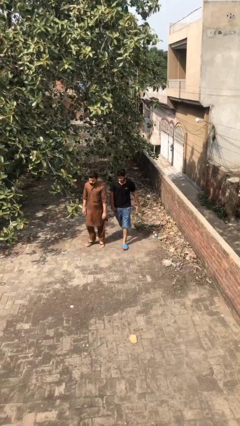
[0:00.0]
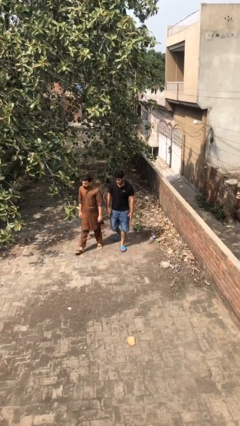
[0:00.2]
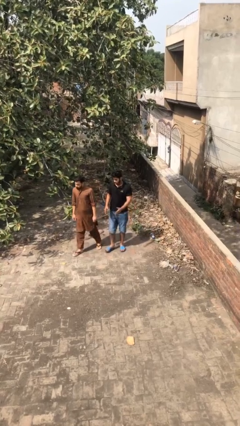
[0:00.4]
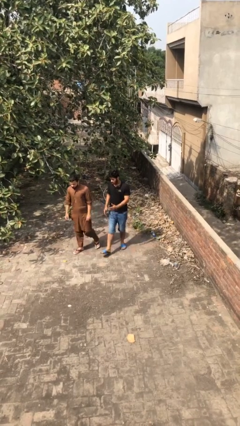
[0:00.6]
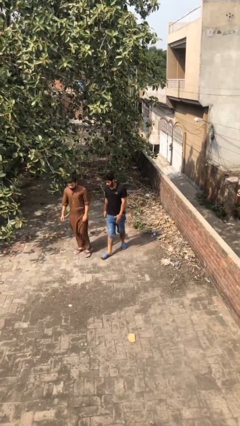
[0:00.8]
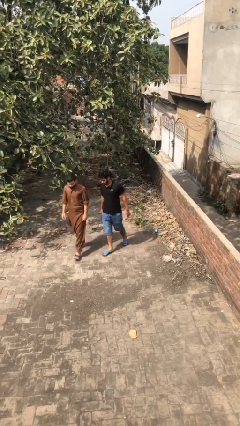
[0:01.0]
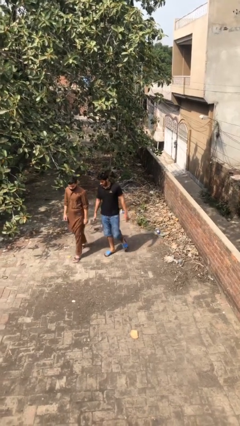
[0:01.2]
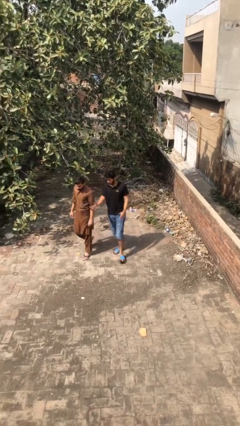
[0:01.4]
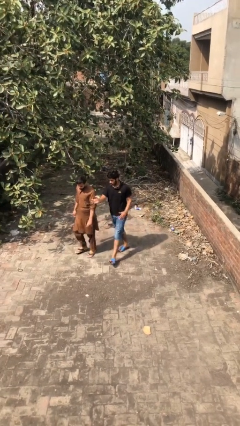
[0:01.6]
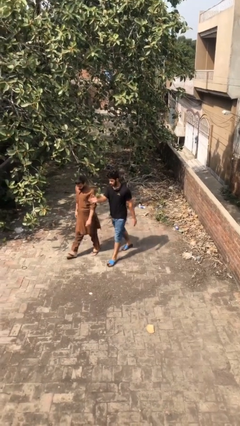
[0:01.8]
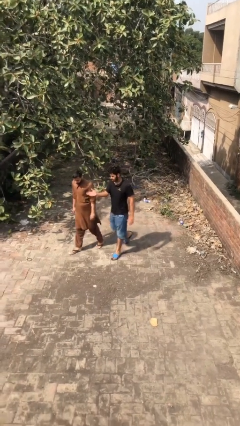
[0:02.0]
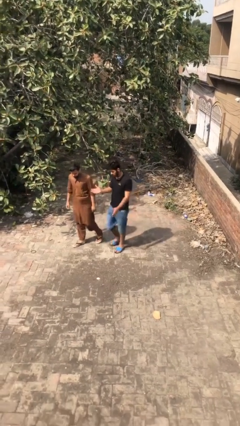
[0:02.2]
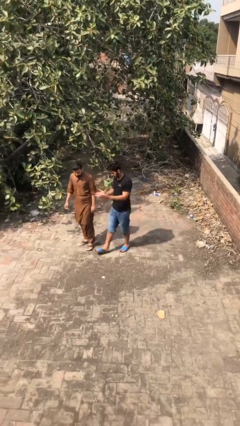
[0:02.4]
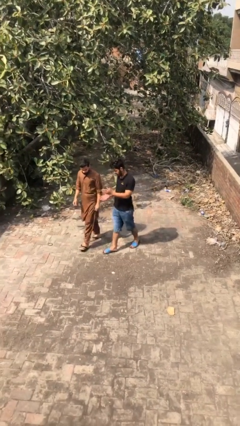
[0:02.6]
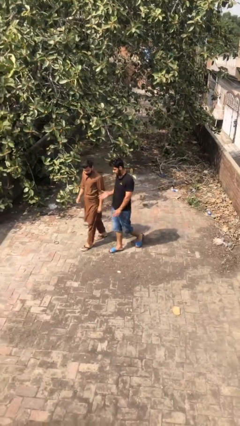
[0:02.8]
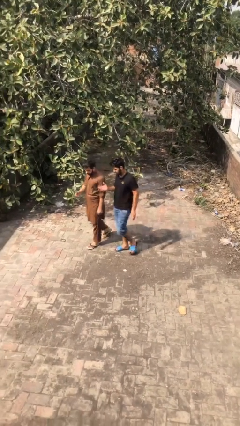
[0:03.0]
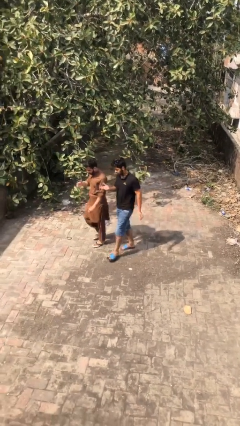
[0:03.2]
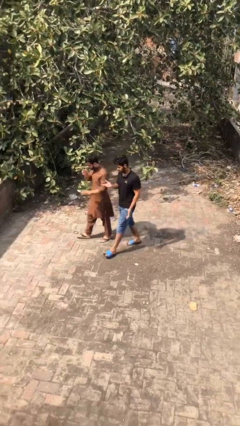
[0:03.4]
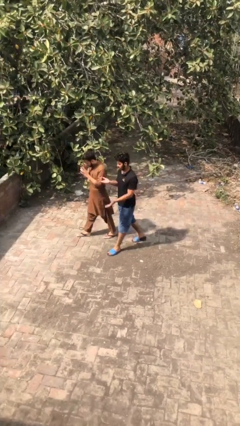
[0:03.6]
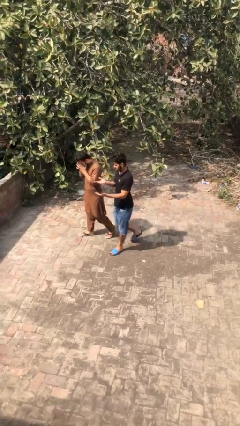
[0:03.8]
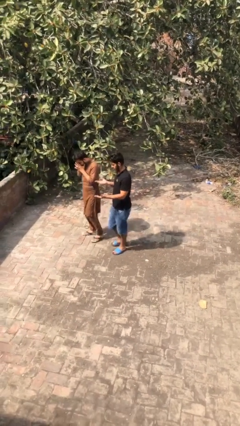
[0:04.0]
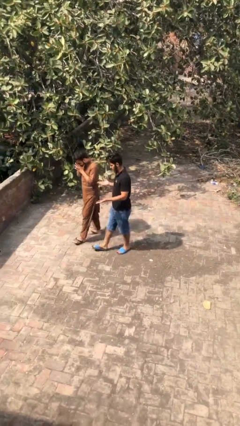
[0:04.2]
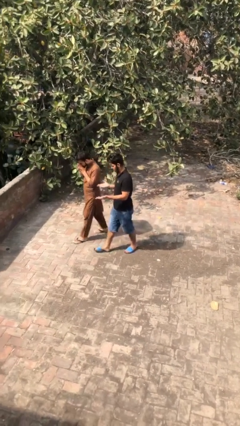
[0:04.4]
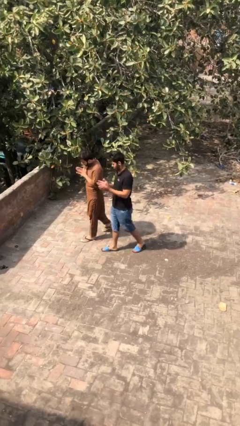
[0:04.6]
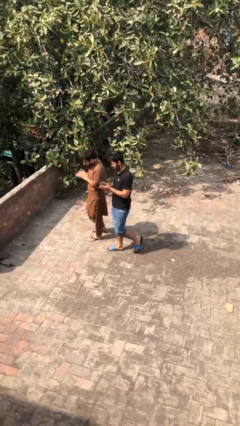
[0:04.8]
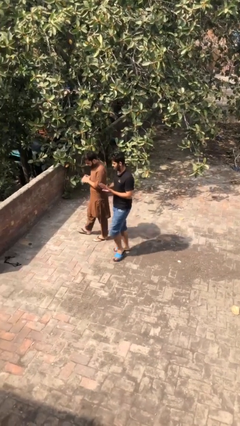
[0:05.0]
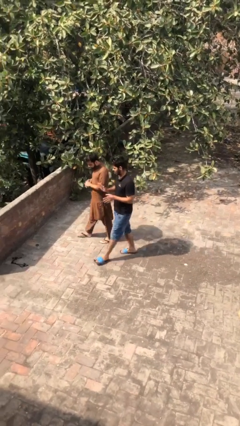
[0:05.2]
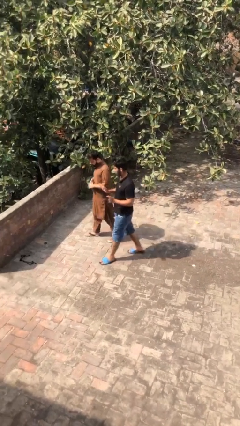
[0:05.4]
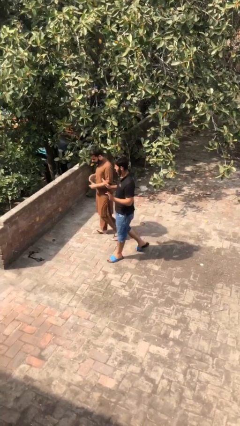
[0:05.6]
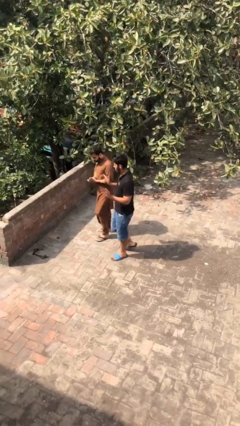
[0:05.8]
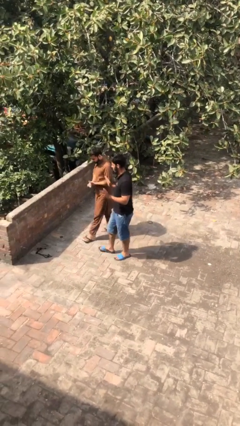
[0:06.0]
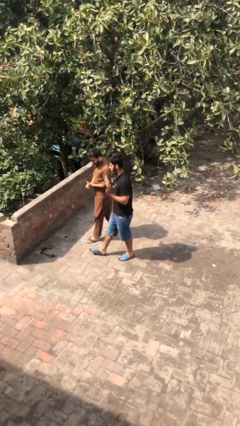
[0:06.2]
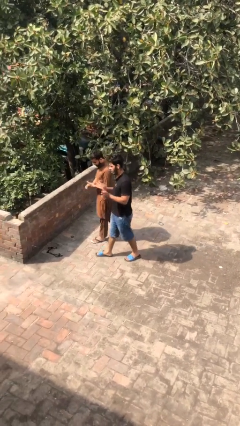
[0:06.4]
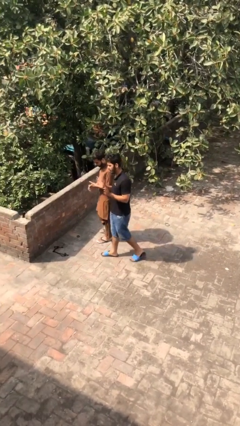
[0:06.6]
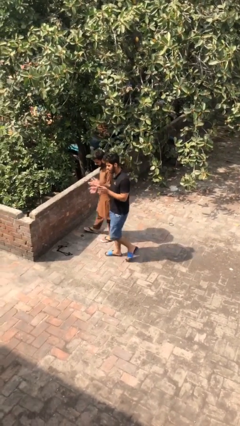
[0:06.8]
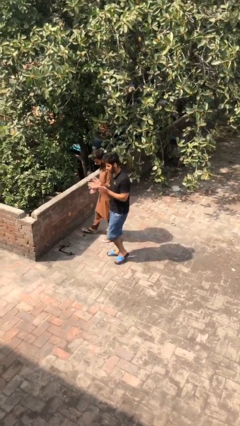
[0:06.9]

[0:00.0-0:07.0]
person talks to person

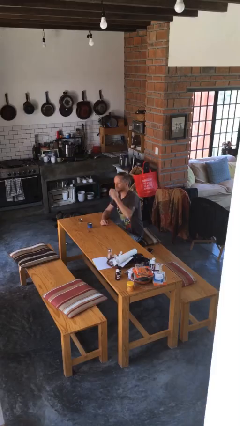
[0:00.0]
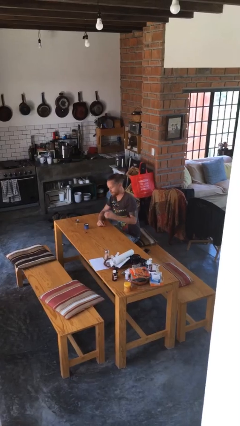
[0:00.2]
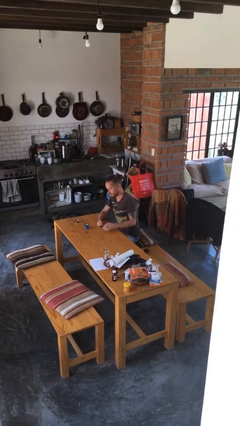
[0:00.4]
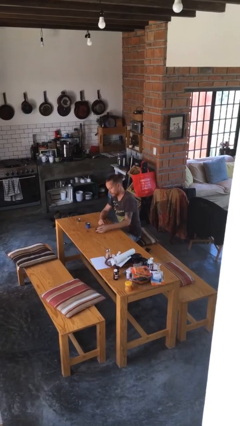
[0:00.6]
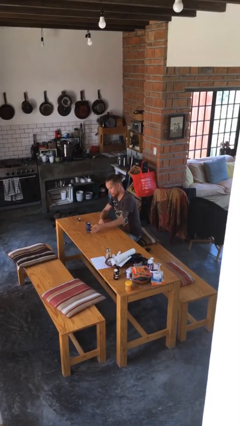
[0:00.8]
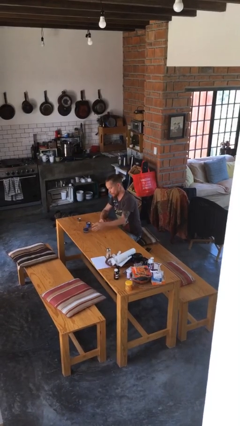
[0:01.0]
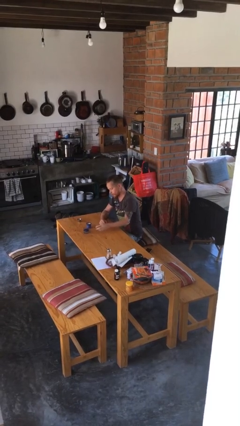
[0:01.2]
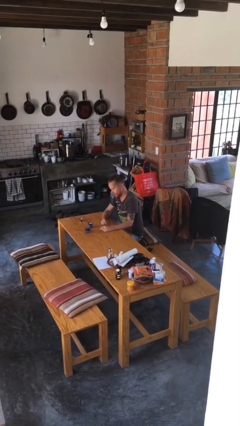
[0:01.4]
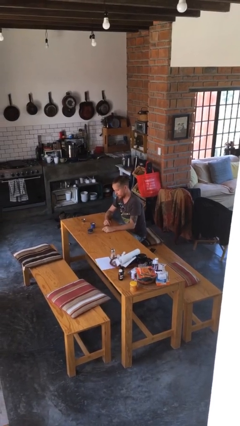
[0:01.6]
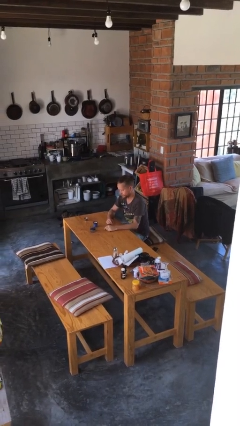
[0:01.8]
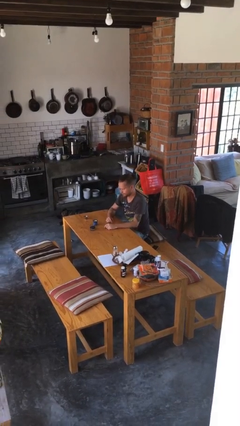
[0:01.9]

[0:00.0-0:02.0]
person puts down object on table

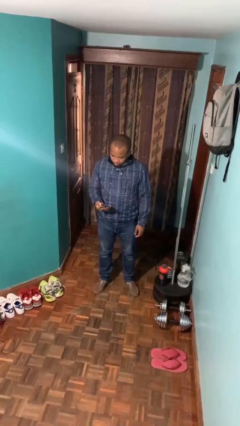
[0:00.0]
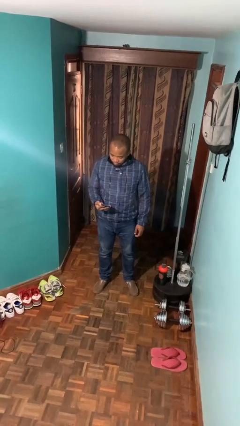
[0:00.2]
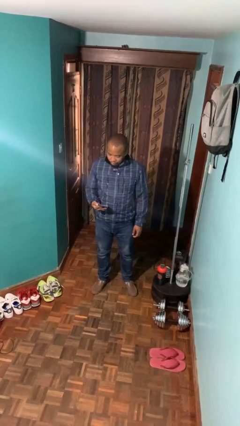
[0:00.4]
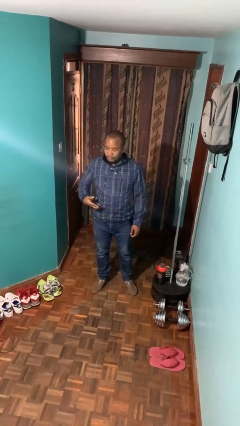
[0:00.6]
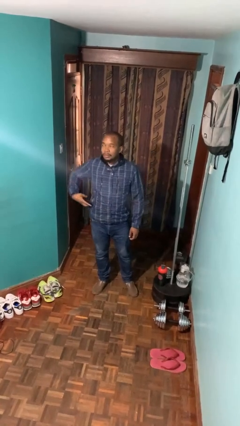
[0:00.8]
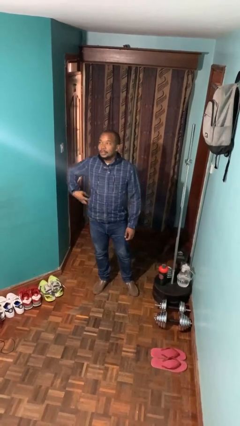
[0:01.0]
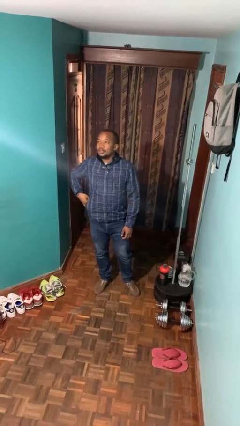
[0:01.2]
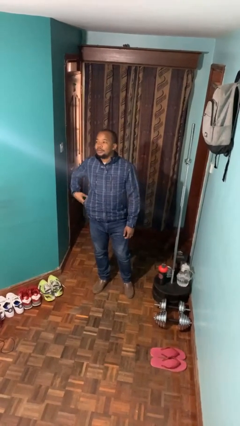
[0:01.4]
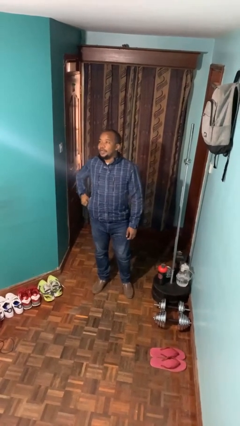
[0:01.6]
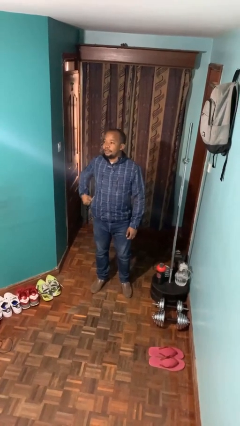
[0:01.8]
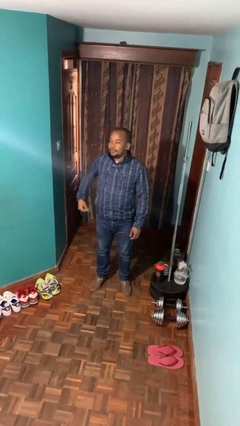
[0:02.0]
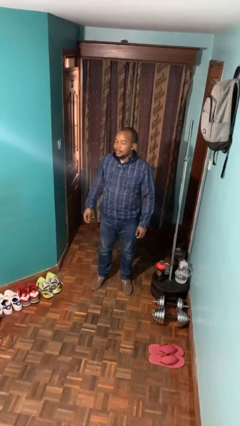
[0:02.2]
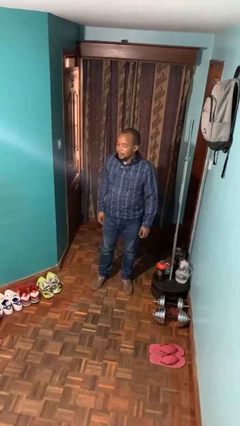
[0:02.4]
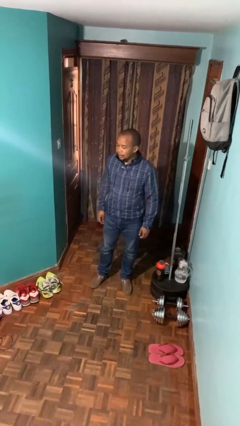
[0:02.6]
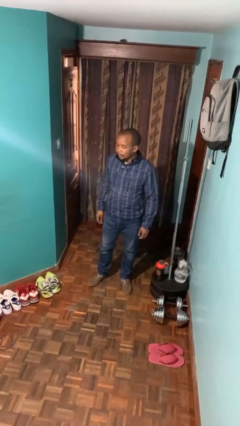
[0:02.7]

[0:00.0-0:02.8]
person puts phone into pocket

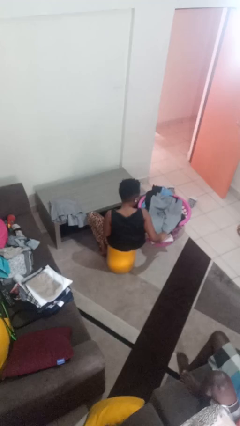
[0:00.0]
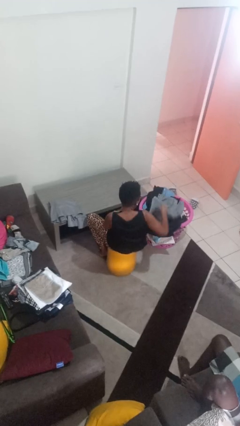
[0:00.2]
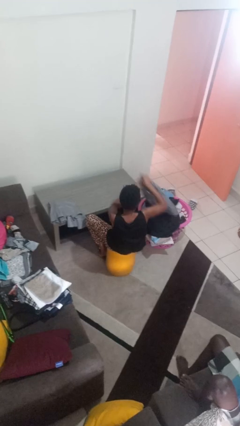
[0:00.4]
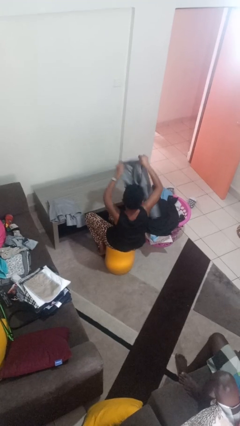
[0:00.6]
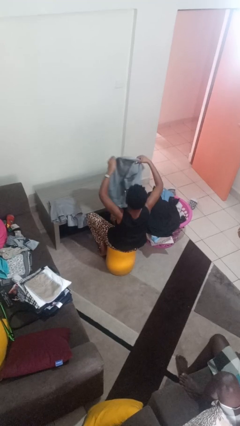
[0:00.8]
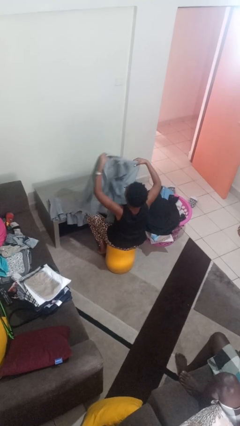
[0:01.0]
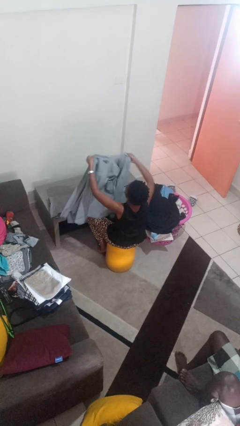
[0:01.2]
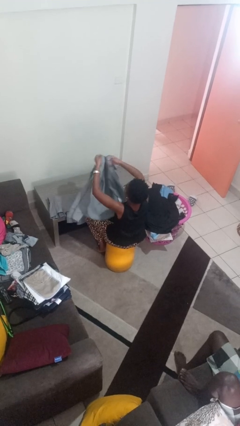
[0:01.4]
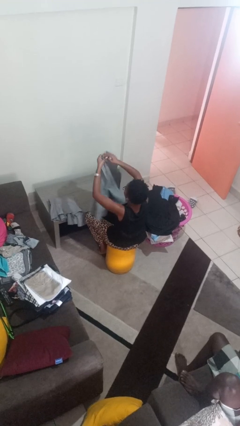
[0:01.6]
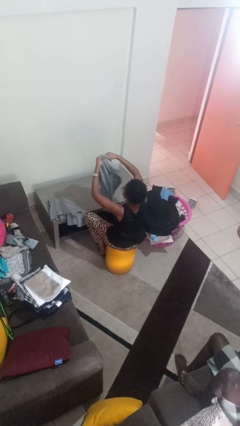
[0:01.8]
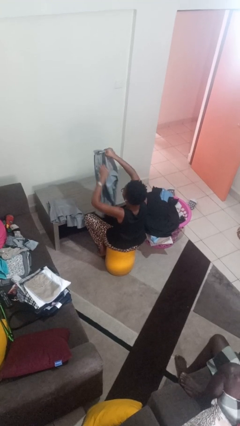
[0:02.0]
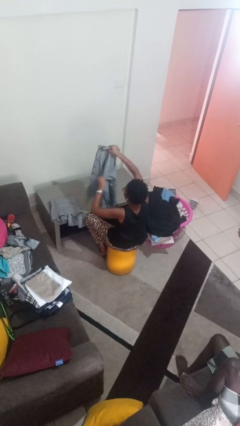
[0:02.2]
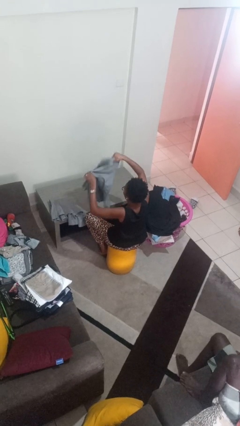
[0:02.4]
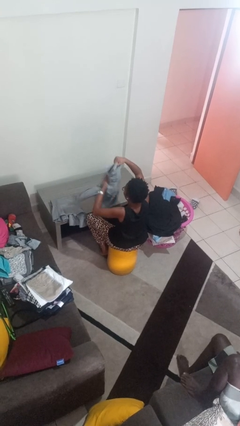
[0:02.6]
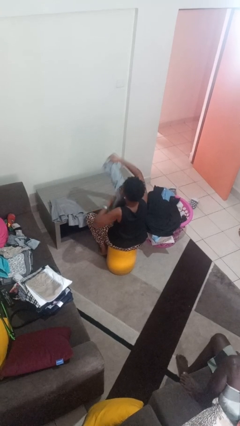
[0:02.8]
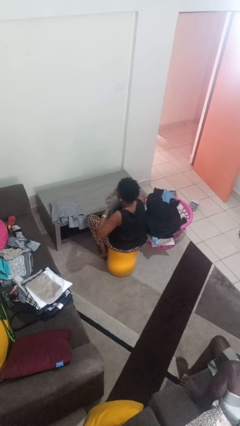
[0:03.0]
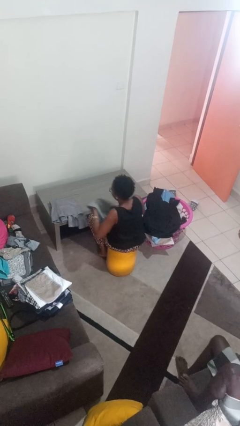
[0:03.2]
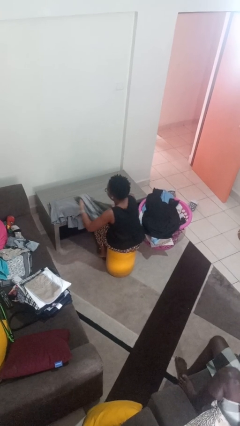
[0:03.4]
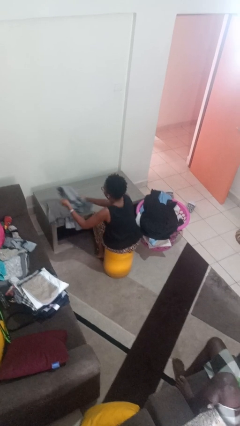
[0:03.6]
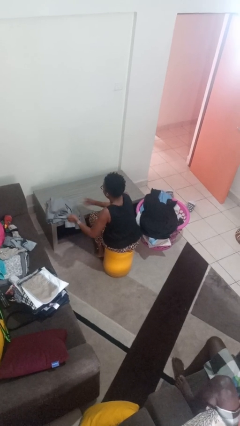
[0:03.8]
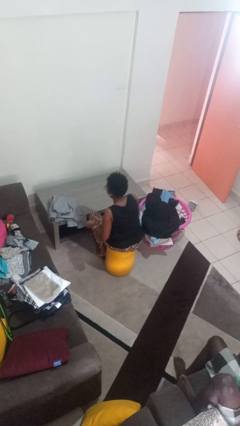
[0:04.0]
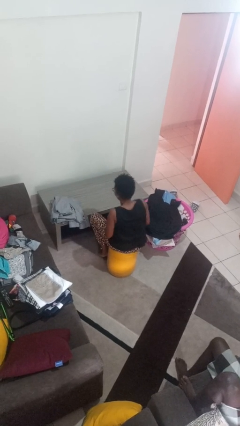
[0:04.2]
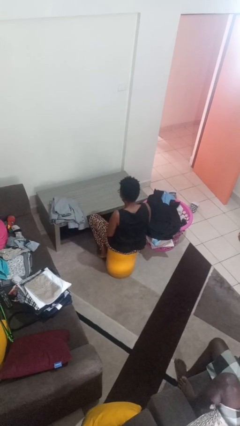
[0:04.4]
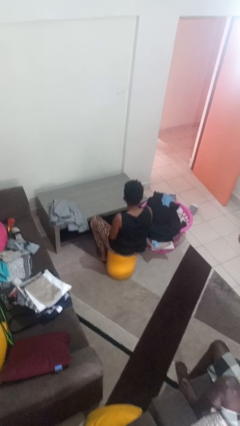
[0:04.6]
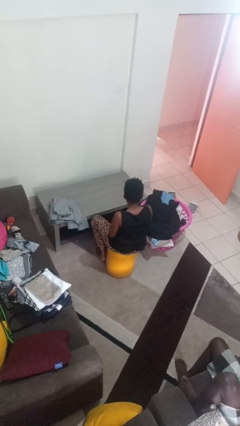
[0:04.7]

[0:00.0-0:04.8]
person folds shirt

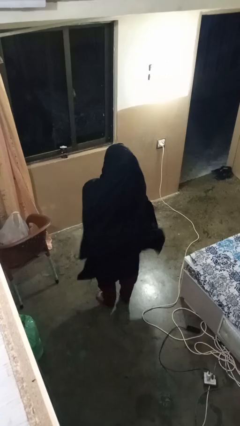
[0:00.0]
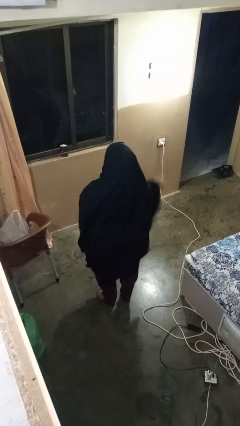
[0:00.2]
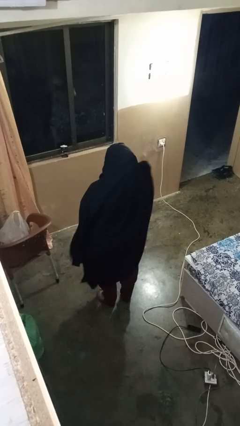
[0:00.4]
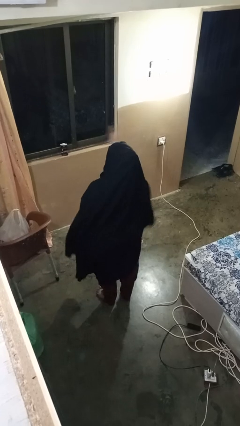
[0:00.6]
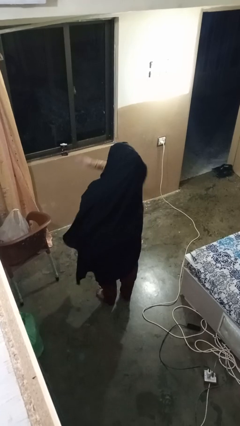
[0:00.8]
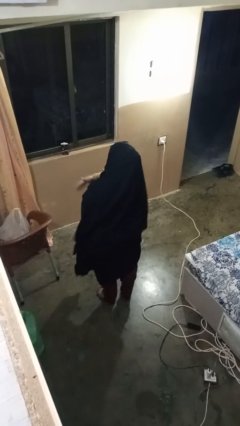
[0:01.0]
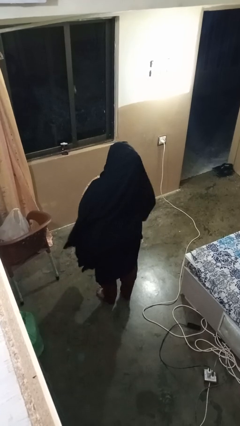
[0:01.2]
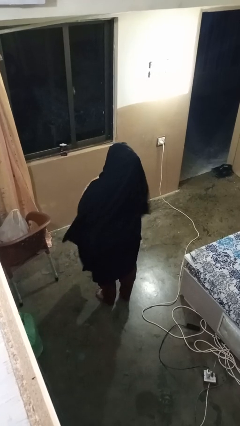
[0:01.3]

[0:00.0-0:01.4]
person gestures swipe left
